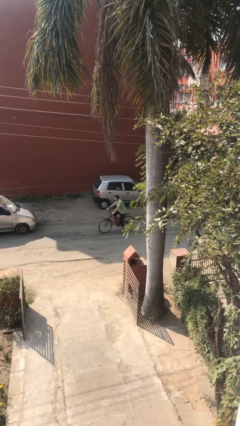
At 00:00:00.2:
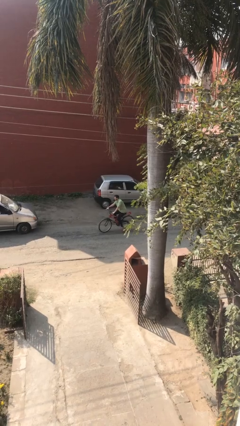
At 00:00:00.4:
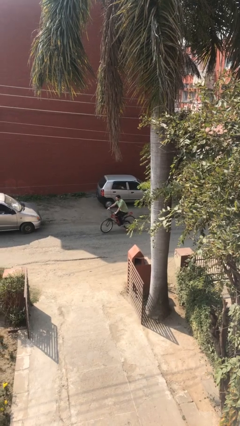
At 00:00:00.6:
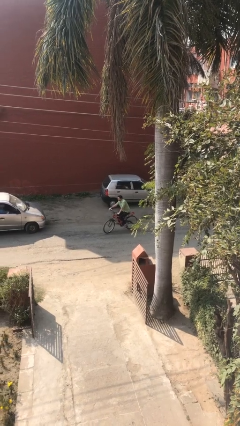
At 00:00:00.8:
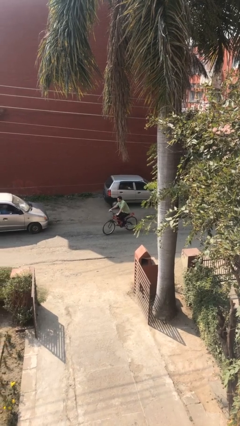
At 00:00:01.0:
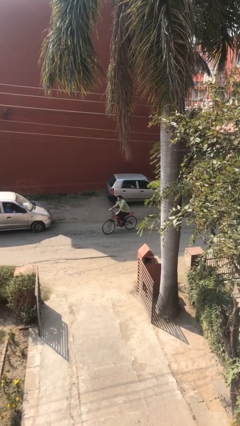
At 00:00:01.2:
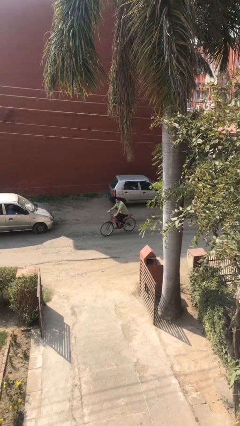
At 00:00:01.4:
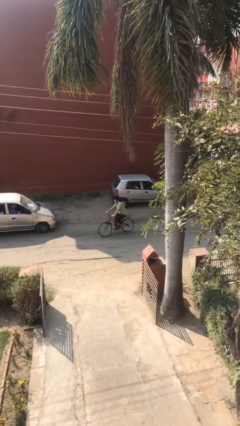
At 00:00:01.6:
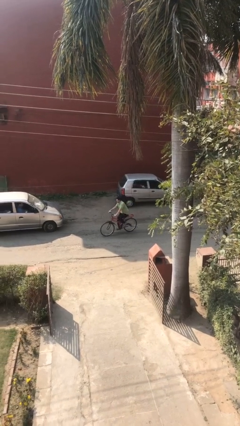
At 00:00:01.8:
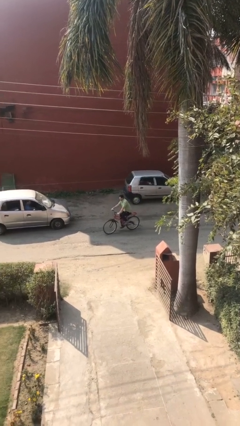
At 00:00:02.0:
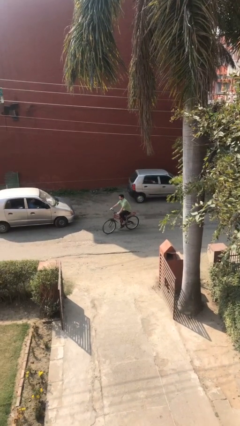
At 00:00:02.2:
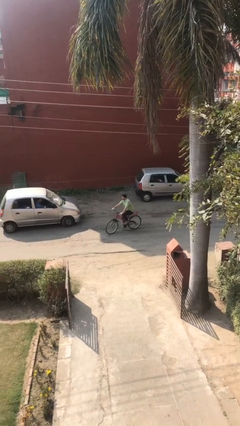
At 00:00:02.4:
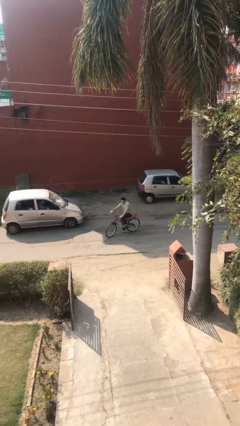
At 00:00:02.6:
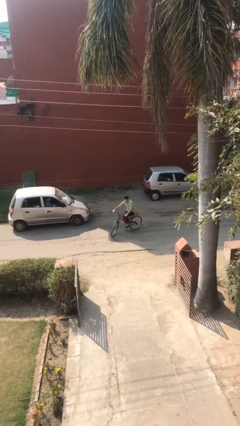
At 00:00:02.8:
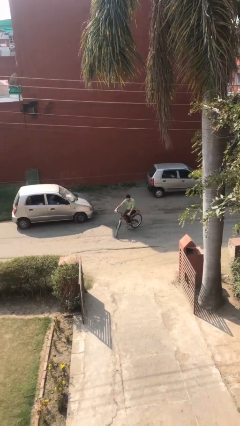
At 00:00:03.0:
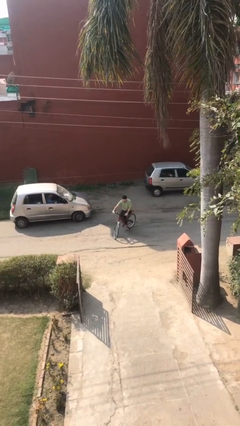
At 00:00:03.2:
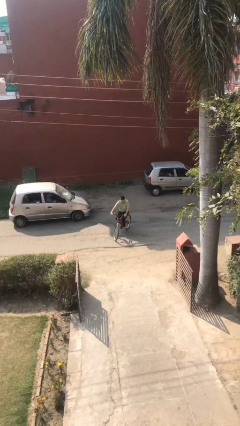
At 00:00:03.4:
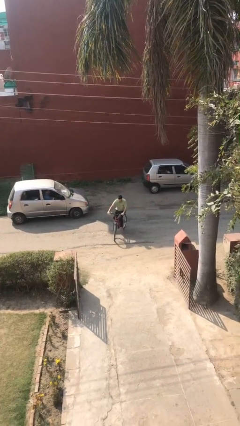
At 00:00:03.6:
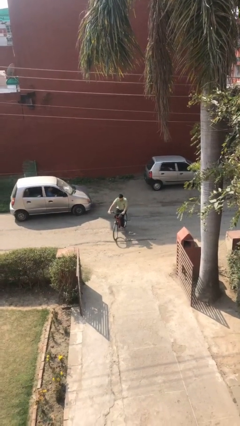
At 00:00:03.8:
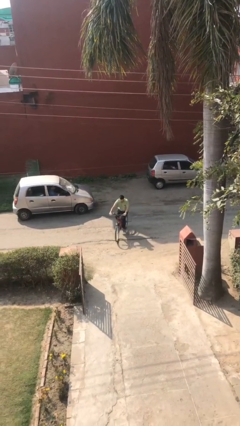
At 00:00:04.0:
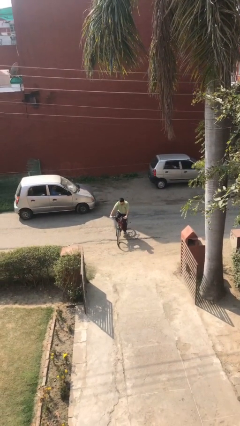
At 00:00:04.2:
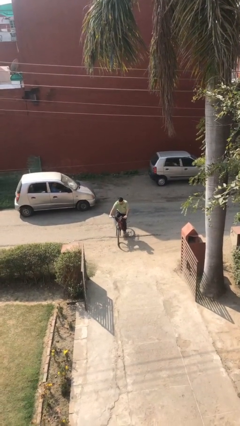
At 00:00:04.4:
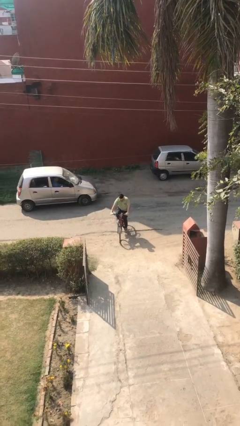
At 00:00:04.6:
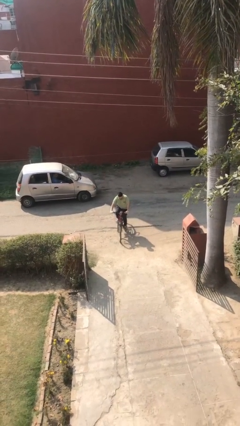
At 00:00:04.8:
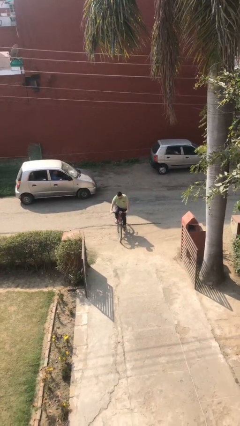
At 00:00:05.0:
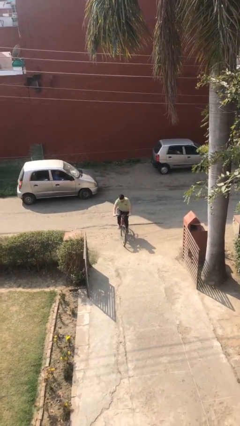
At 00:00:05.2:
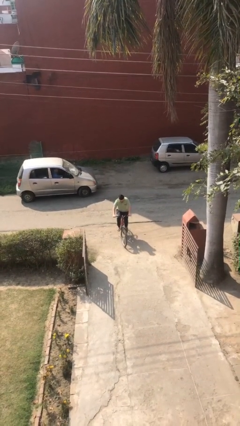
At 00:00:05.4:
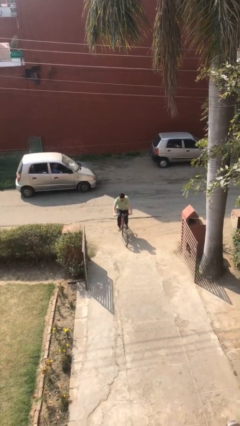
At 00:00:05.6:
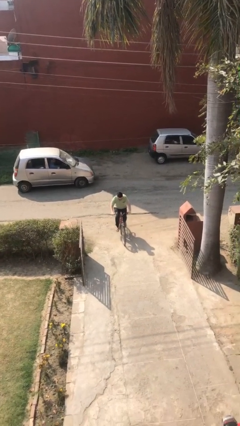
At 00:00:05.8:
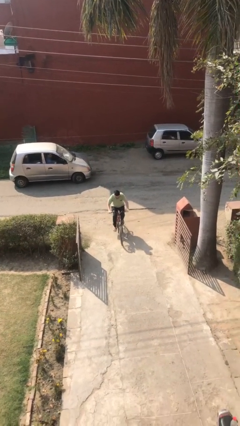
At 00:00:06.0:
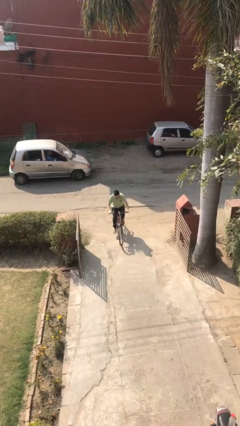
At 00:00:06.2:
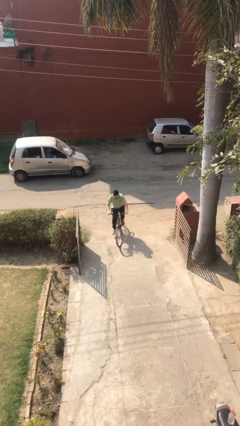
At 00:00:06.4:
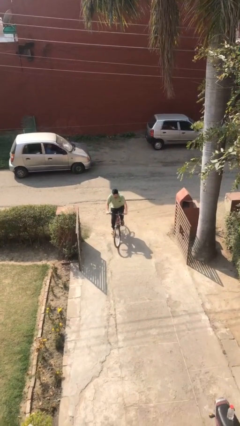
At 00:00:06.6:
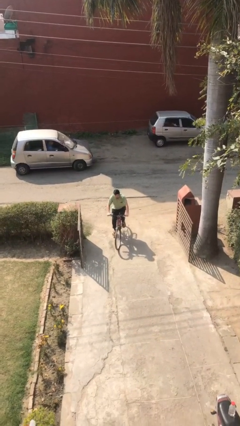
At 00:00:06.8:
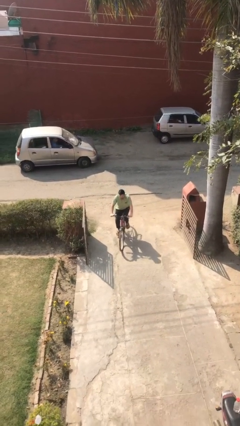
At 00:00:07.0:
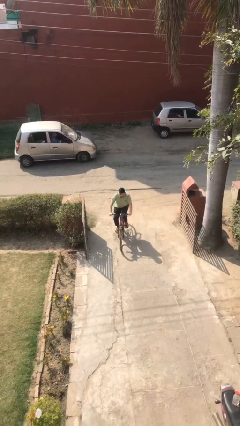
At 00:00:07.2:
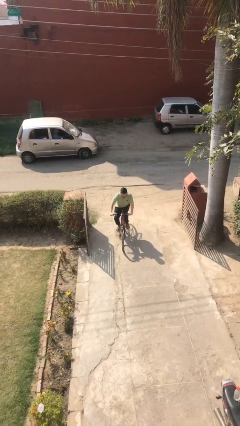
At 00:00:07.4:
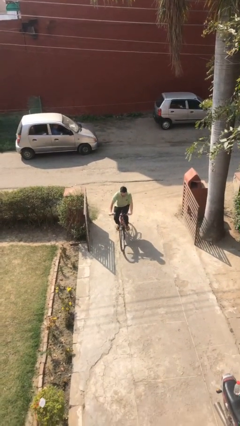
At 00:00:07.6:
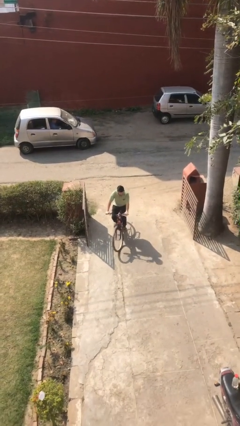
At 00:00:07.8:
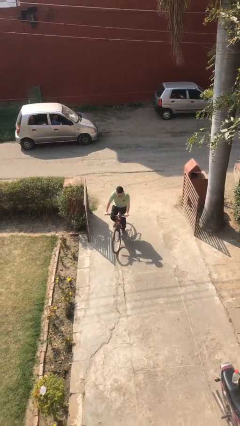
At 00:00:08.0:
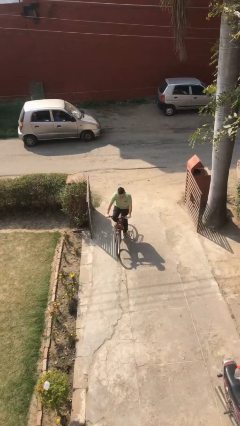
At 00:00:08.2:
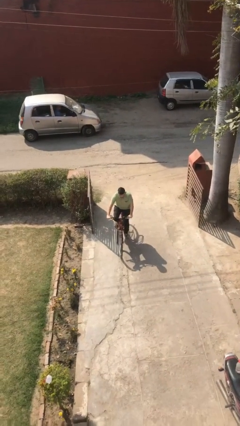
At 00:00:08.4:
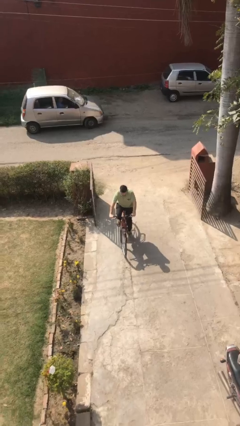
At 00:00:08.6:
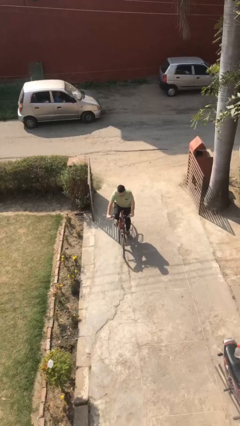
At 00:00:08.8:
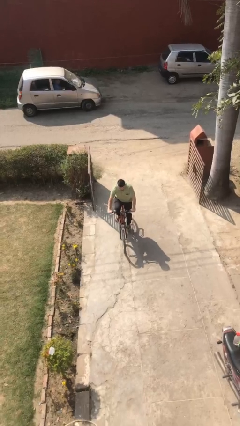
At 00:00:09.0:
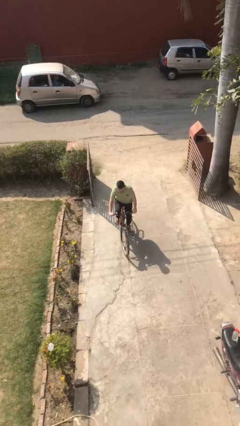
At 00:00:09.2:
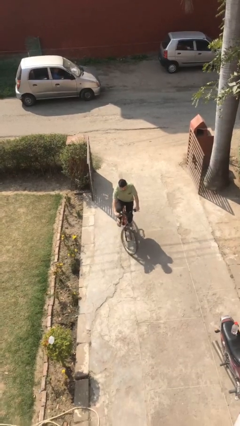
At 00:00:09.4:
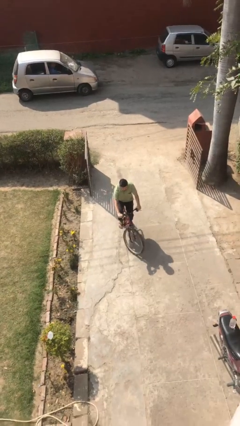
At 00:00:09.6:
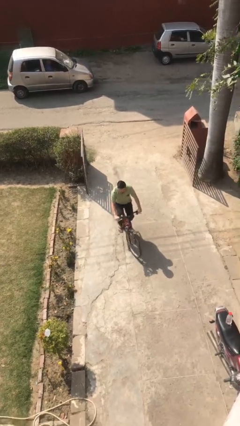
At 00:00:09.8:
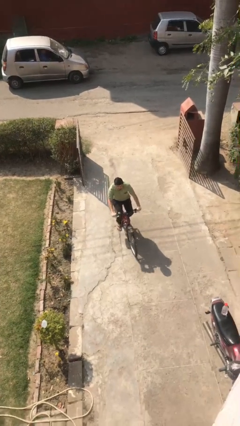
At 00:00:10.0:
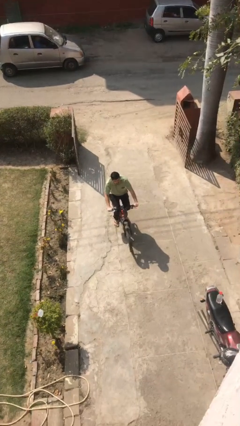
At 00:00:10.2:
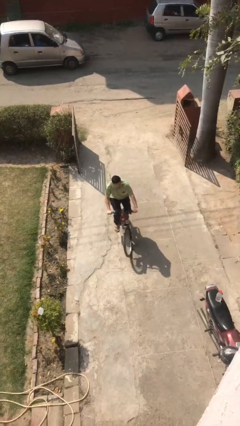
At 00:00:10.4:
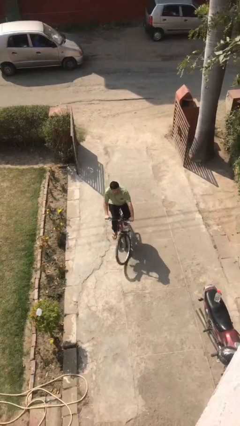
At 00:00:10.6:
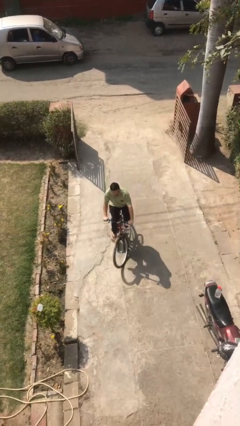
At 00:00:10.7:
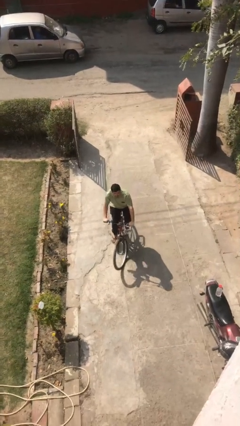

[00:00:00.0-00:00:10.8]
person rides bicycle

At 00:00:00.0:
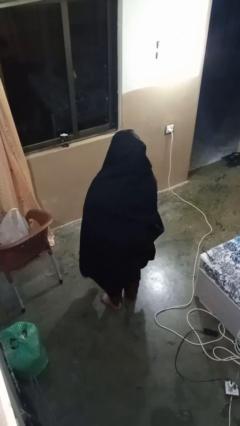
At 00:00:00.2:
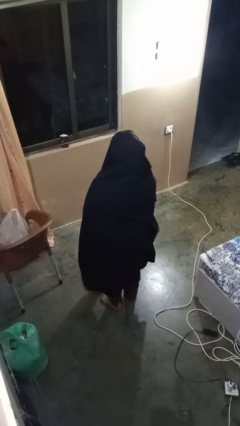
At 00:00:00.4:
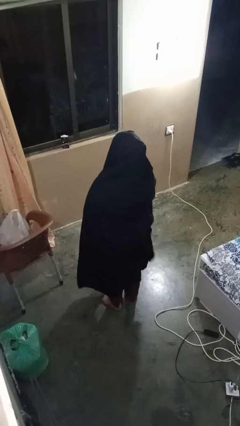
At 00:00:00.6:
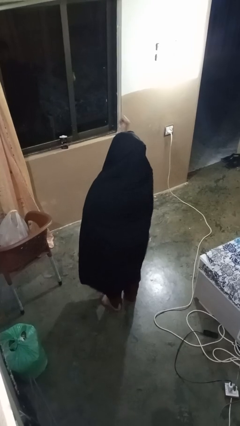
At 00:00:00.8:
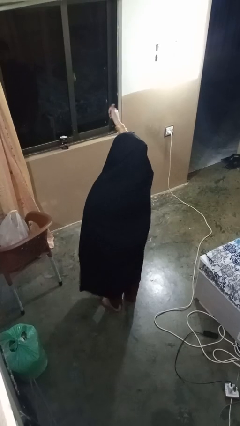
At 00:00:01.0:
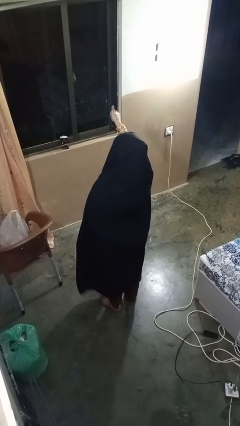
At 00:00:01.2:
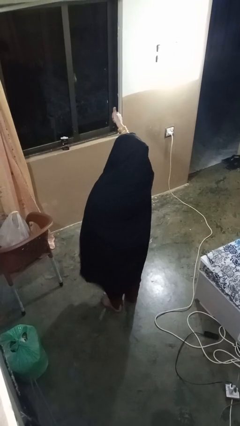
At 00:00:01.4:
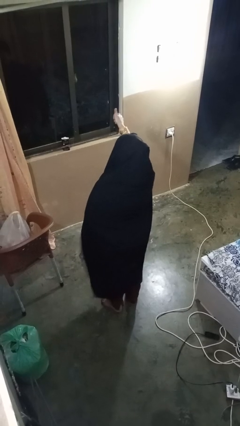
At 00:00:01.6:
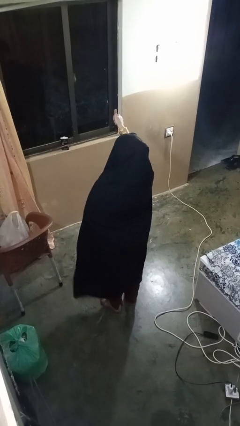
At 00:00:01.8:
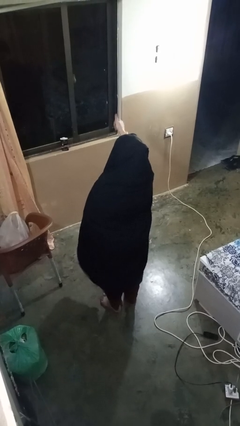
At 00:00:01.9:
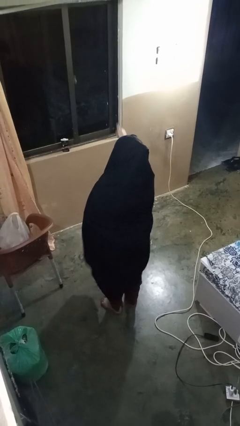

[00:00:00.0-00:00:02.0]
person gestures thumbs up

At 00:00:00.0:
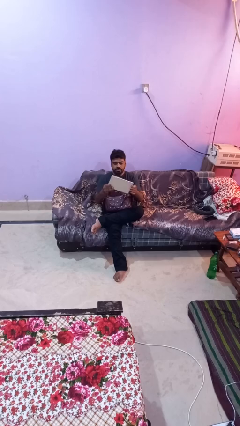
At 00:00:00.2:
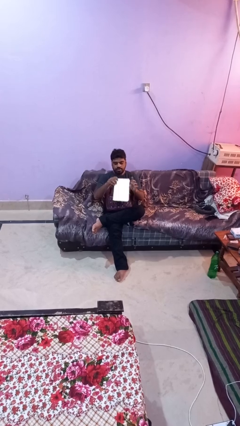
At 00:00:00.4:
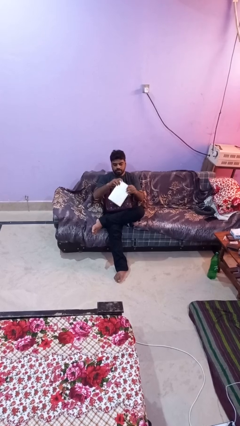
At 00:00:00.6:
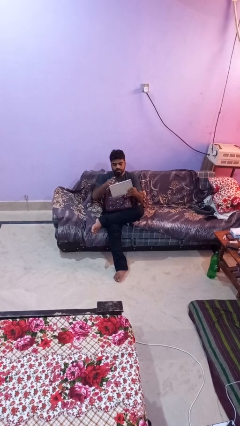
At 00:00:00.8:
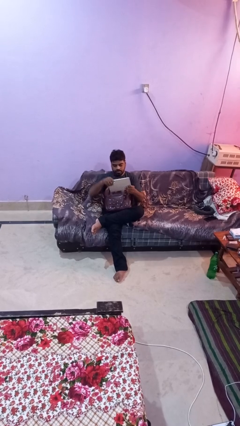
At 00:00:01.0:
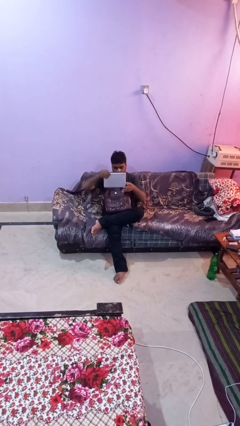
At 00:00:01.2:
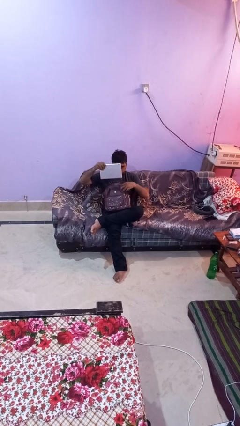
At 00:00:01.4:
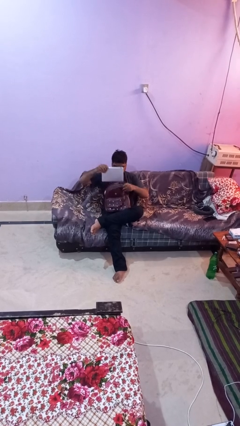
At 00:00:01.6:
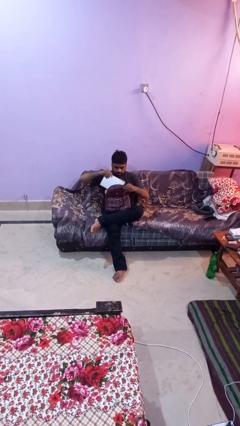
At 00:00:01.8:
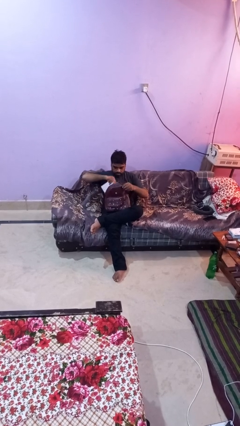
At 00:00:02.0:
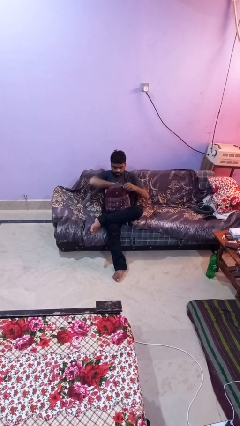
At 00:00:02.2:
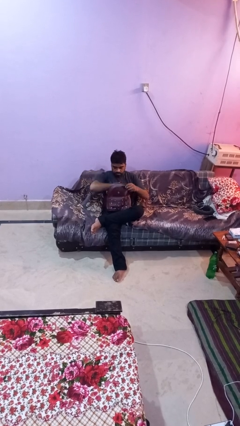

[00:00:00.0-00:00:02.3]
person puts object into backpack

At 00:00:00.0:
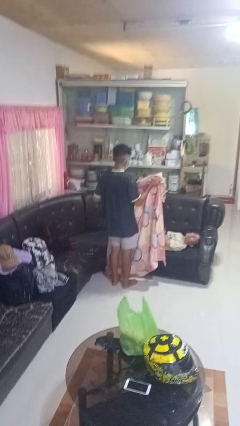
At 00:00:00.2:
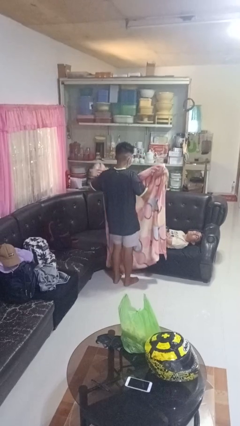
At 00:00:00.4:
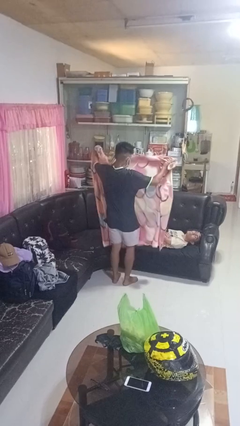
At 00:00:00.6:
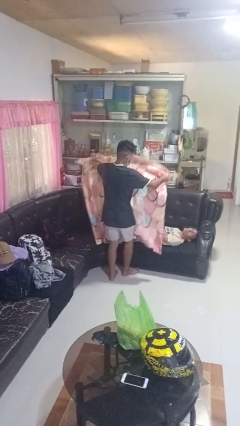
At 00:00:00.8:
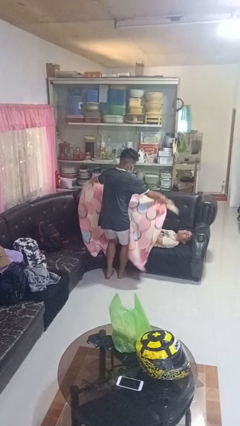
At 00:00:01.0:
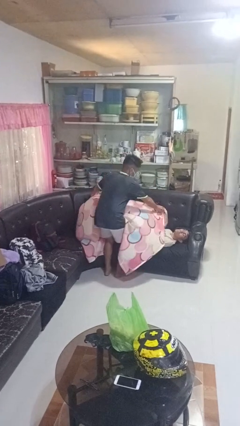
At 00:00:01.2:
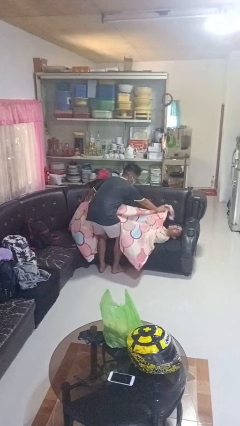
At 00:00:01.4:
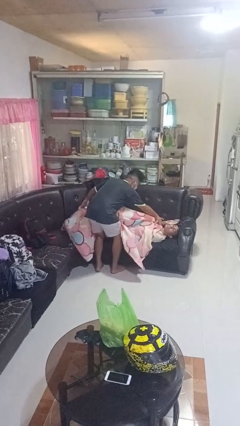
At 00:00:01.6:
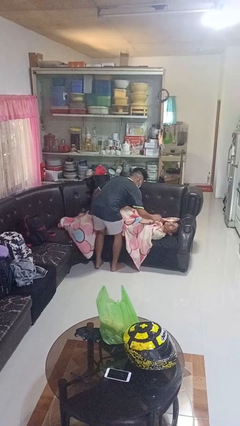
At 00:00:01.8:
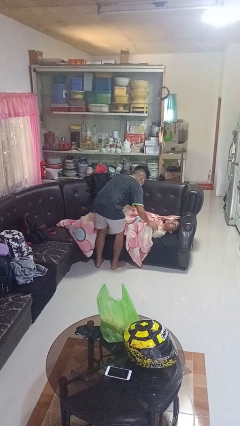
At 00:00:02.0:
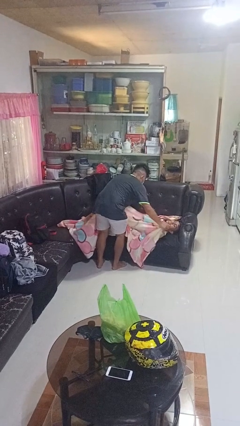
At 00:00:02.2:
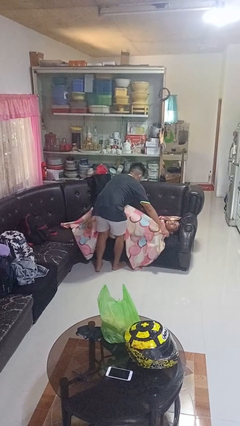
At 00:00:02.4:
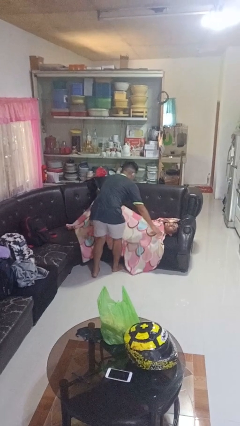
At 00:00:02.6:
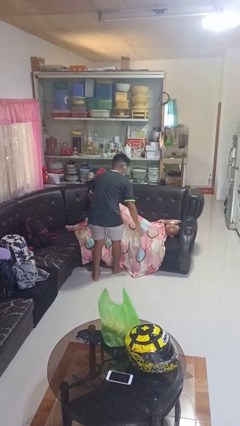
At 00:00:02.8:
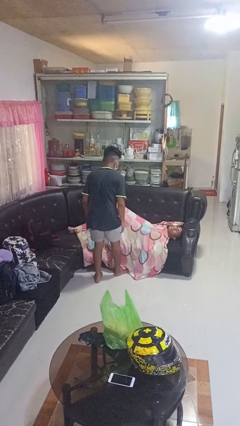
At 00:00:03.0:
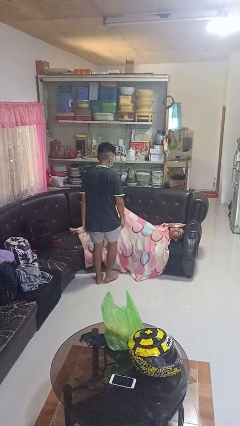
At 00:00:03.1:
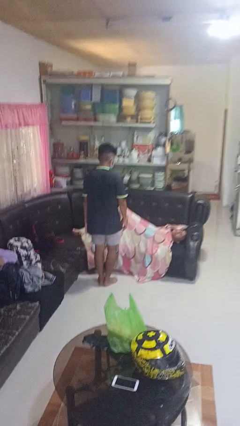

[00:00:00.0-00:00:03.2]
person covers friend with blanket
